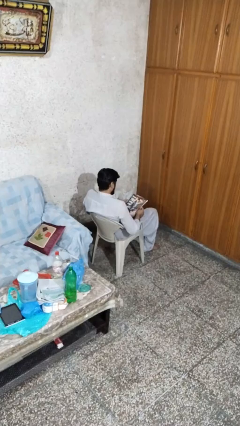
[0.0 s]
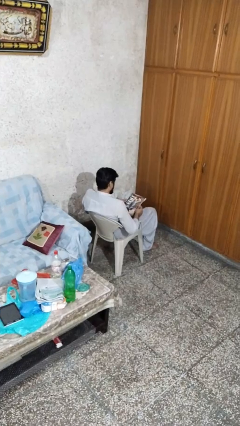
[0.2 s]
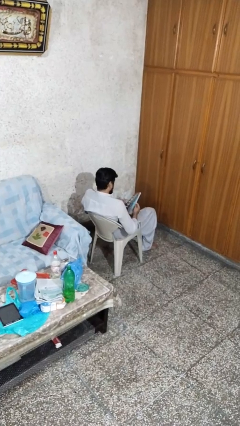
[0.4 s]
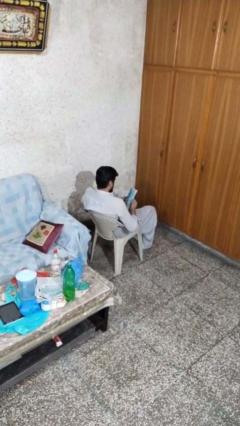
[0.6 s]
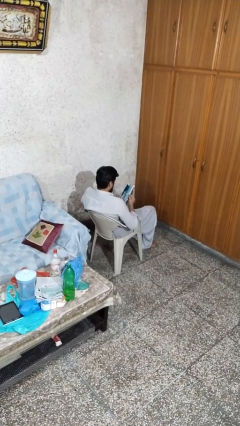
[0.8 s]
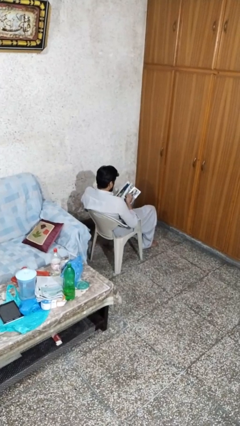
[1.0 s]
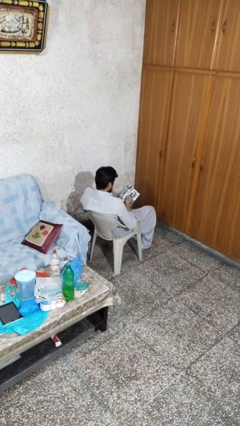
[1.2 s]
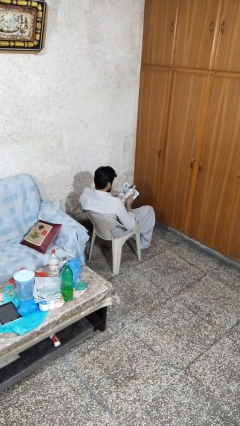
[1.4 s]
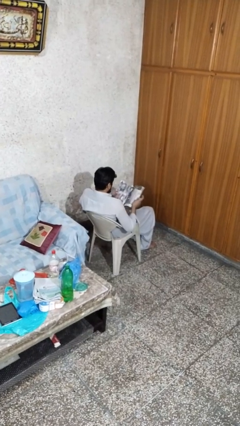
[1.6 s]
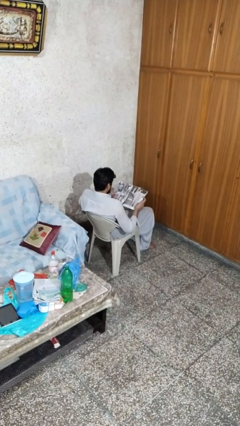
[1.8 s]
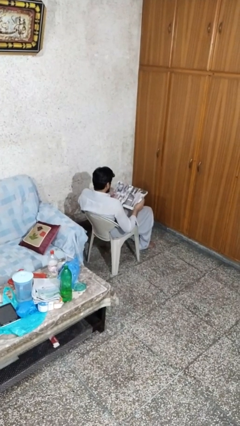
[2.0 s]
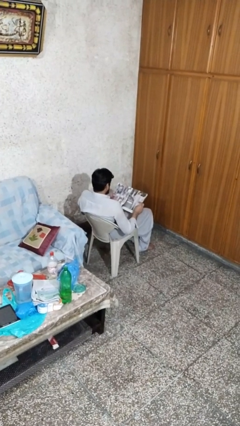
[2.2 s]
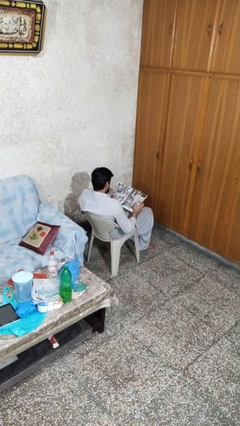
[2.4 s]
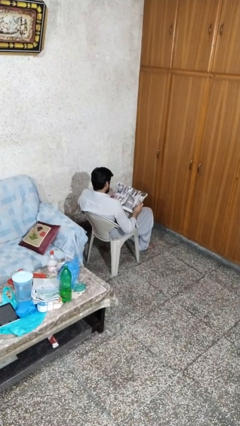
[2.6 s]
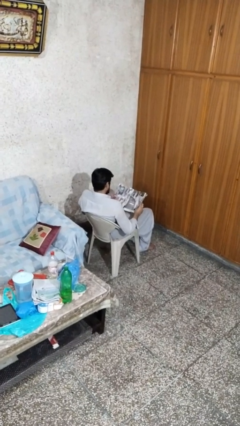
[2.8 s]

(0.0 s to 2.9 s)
person reads magazine

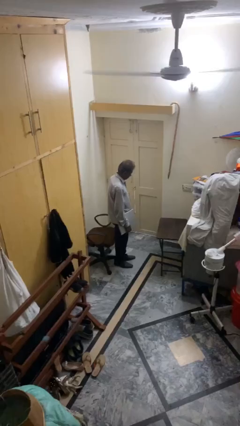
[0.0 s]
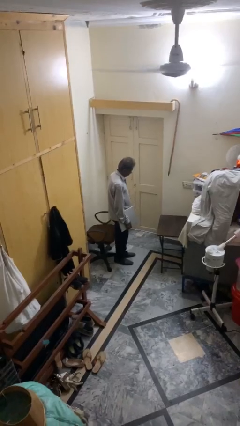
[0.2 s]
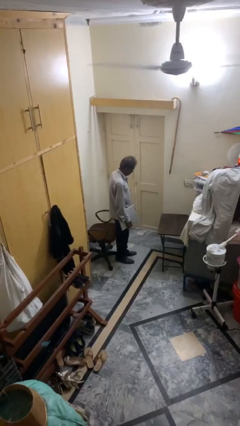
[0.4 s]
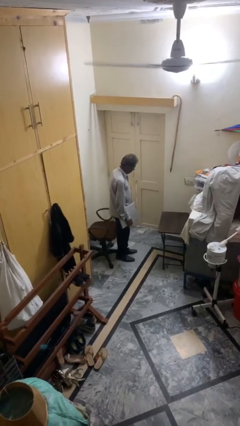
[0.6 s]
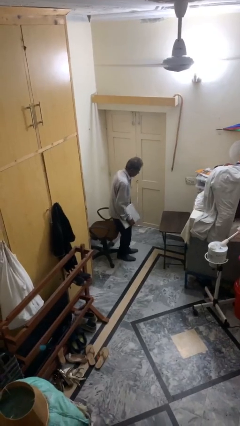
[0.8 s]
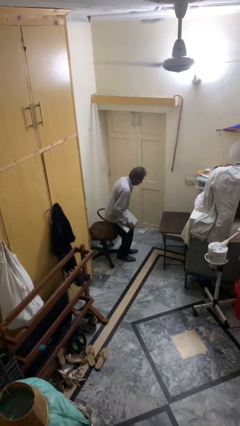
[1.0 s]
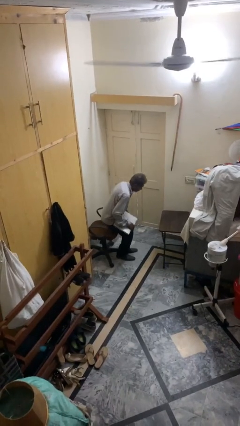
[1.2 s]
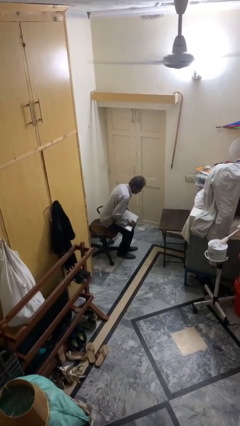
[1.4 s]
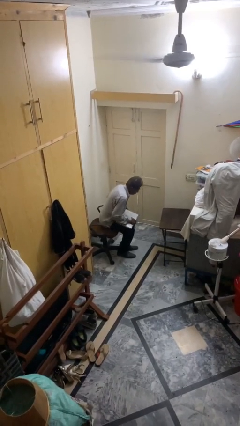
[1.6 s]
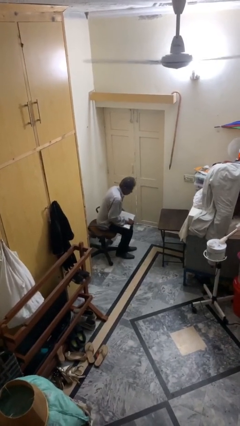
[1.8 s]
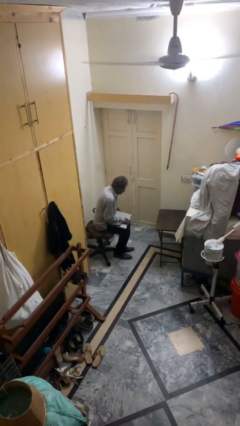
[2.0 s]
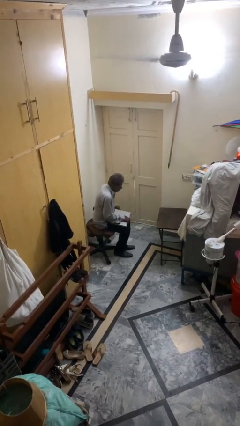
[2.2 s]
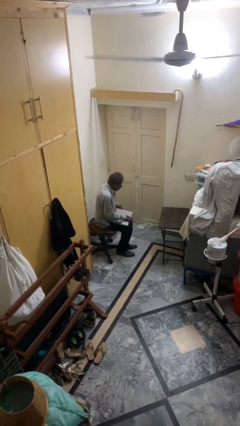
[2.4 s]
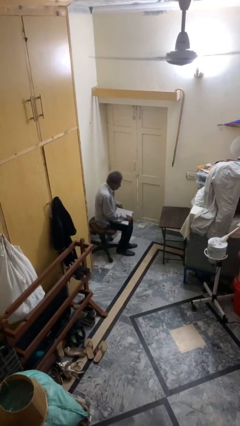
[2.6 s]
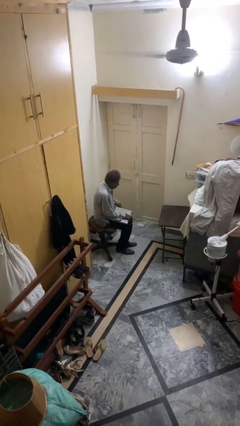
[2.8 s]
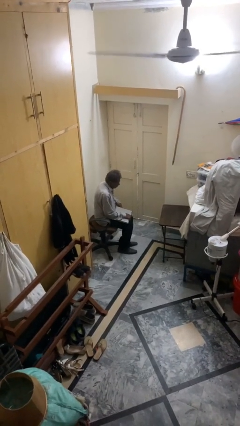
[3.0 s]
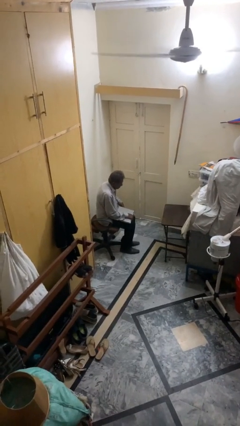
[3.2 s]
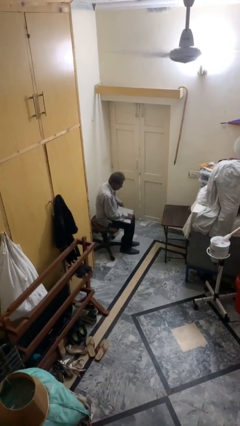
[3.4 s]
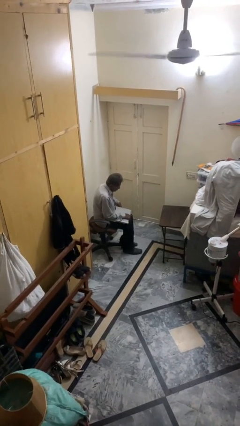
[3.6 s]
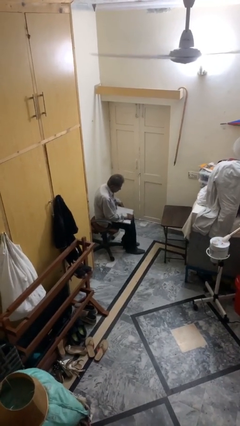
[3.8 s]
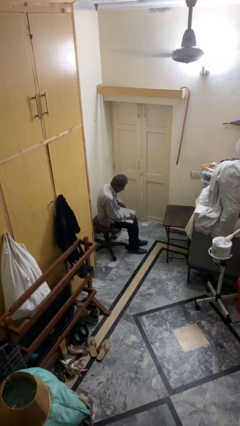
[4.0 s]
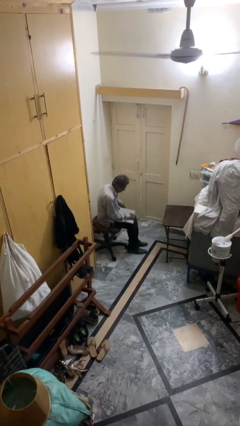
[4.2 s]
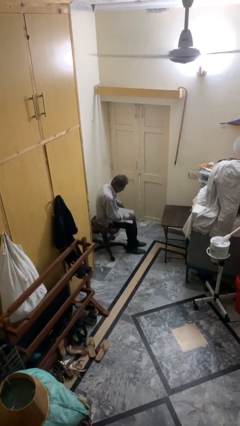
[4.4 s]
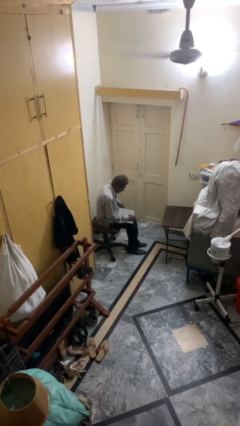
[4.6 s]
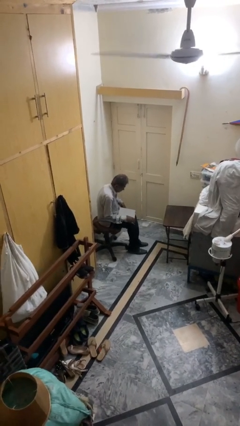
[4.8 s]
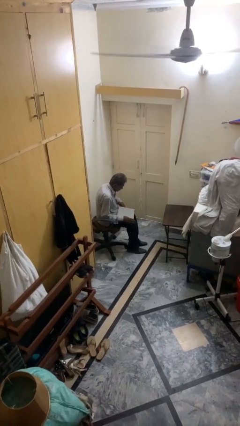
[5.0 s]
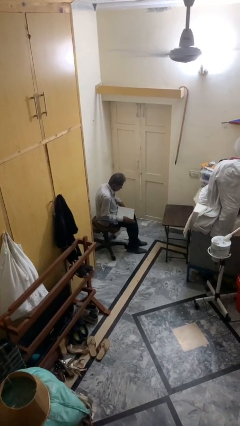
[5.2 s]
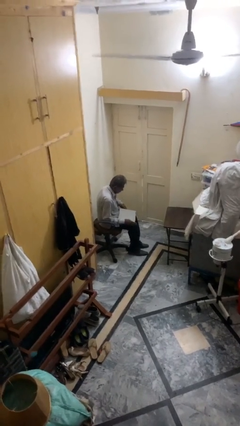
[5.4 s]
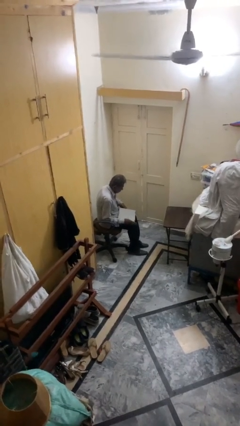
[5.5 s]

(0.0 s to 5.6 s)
person sits down

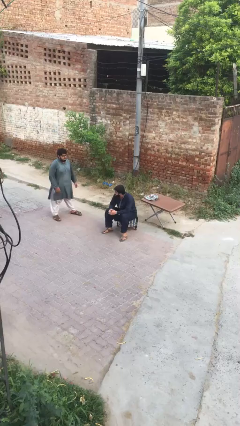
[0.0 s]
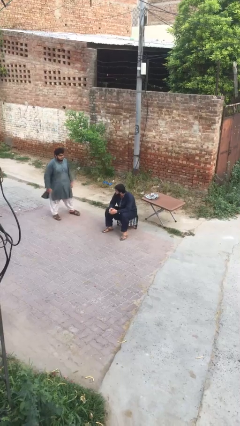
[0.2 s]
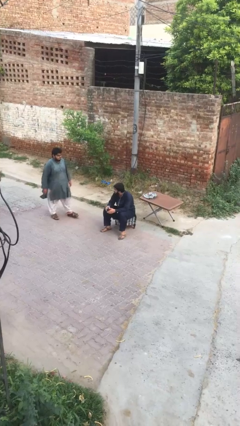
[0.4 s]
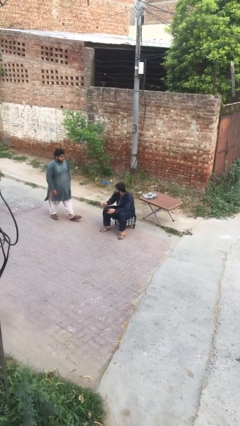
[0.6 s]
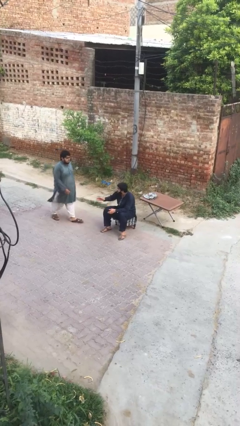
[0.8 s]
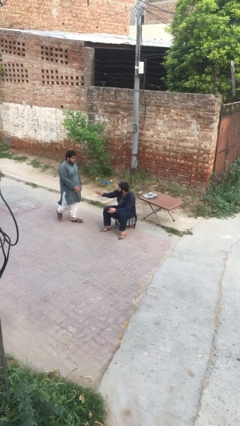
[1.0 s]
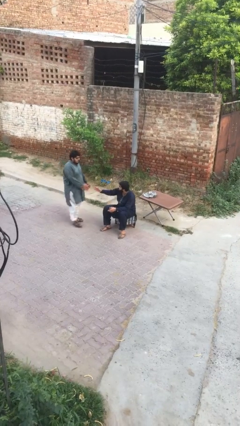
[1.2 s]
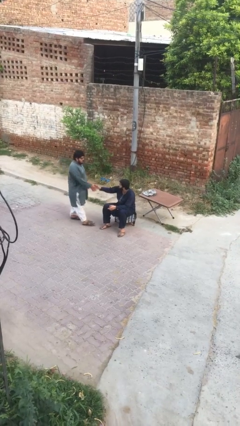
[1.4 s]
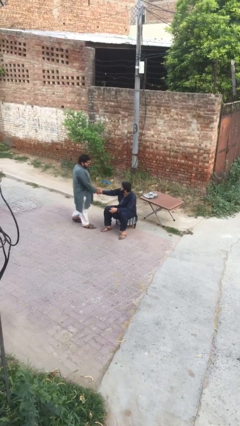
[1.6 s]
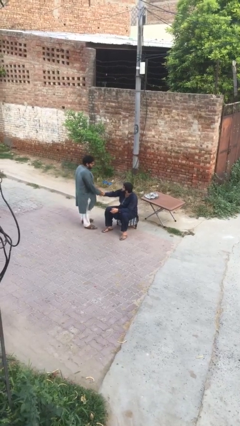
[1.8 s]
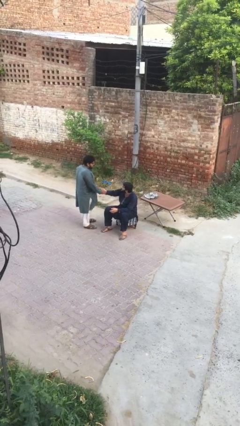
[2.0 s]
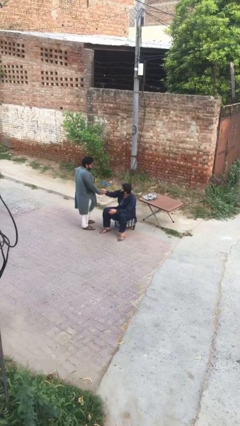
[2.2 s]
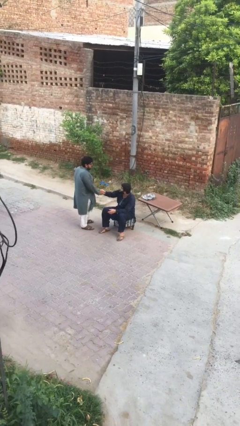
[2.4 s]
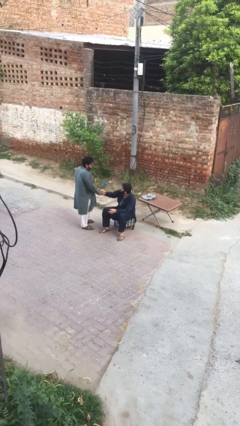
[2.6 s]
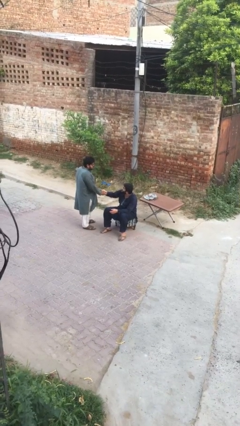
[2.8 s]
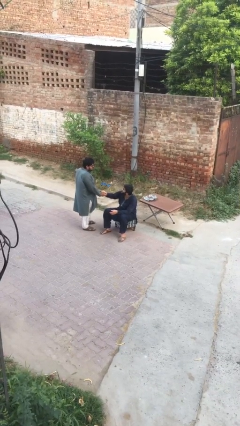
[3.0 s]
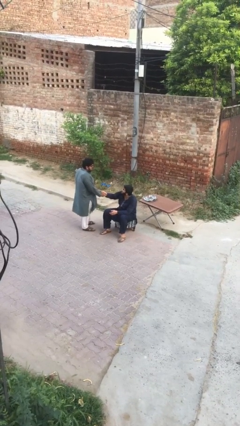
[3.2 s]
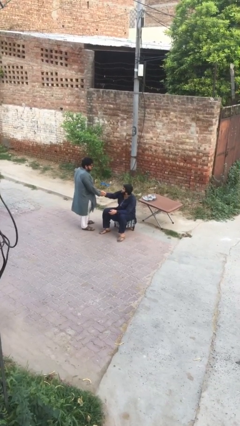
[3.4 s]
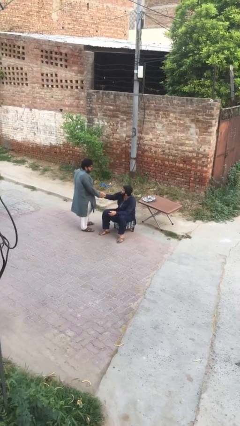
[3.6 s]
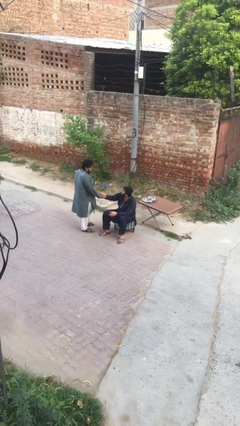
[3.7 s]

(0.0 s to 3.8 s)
person shakes hand

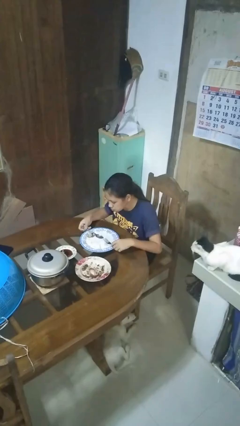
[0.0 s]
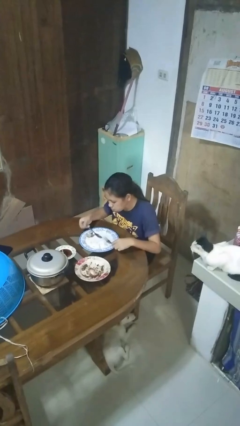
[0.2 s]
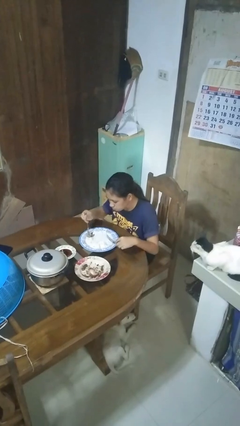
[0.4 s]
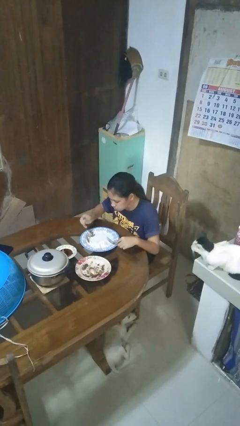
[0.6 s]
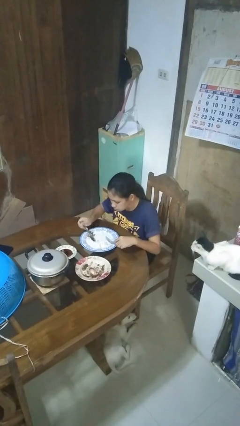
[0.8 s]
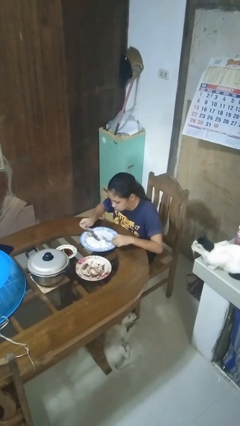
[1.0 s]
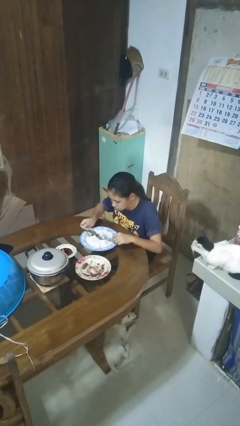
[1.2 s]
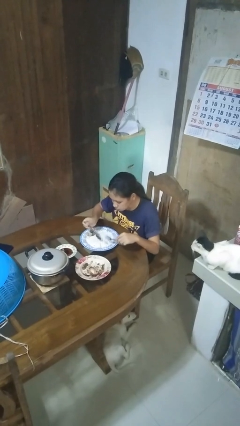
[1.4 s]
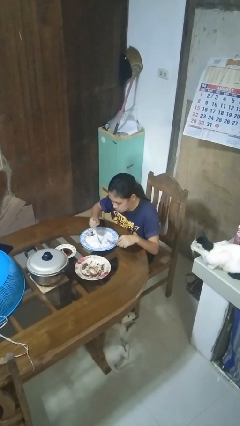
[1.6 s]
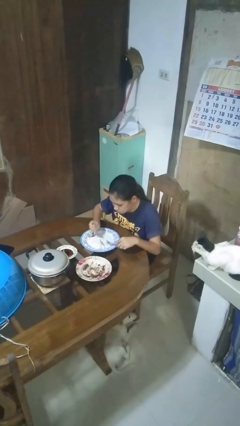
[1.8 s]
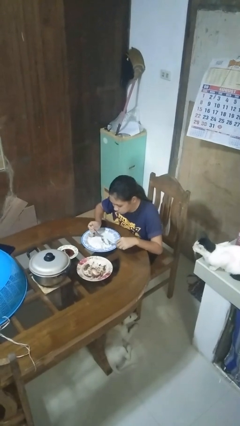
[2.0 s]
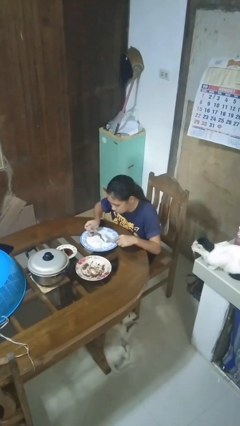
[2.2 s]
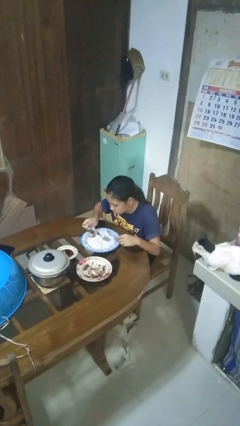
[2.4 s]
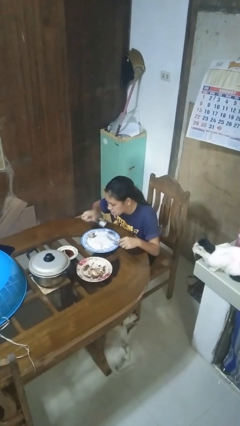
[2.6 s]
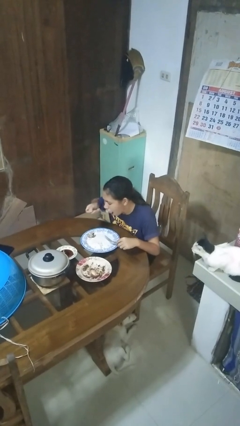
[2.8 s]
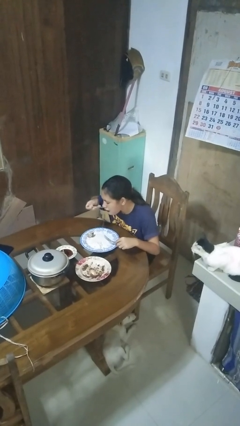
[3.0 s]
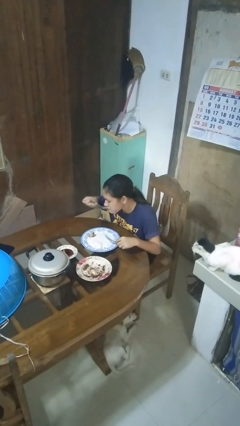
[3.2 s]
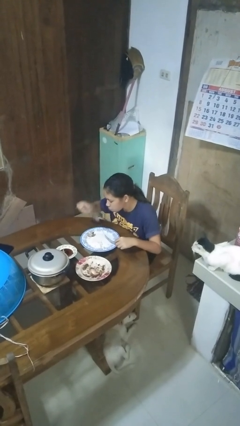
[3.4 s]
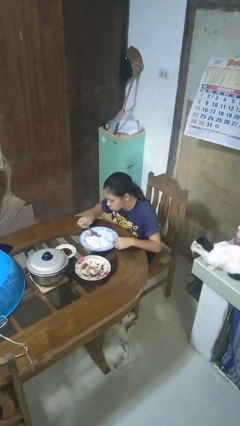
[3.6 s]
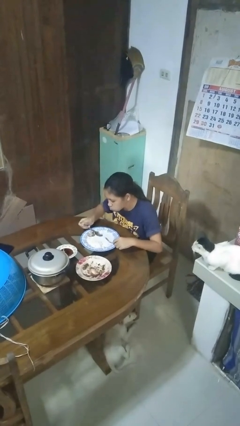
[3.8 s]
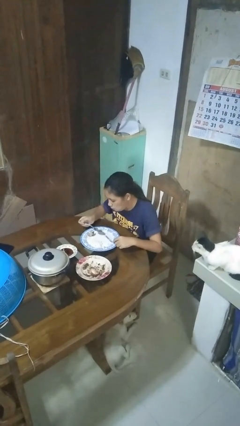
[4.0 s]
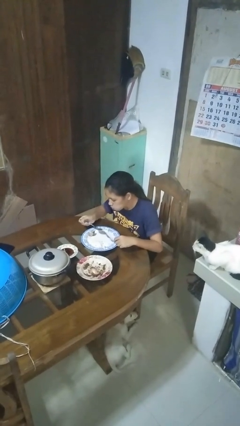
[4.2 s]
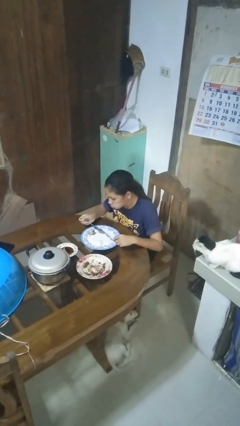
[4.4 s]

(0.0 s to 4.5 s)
person eats with utensil

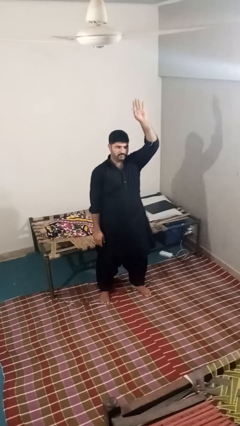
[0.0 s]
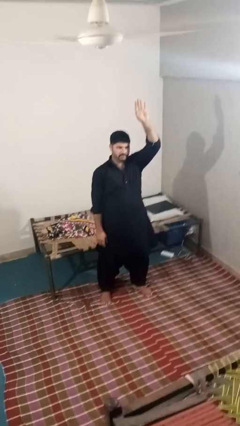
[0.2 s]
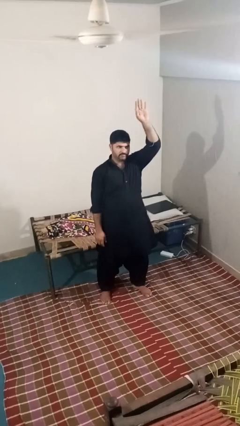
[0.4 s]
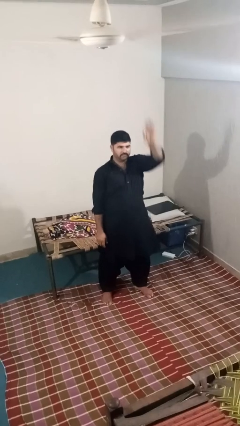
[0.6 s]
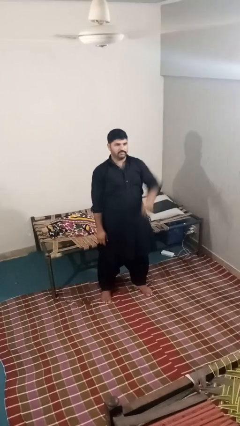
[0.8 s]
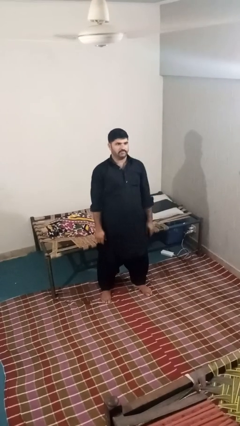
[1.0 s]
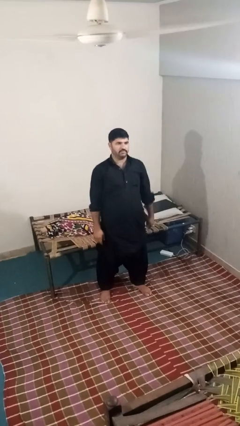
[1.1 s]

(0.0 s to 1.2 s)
person gestures lower hand
